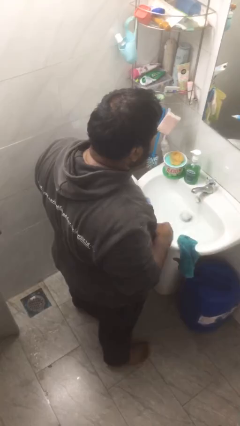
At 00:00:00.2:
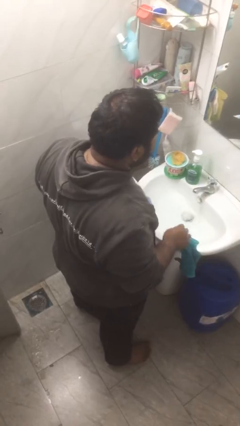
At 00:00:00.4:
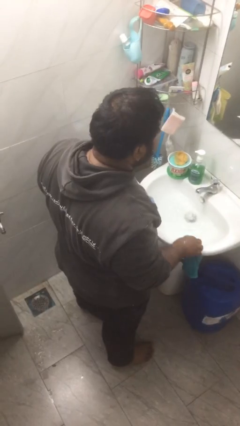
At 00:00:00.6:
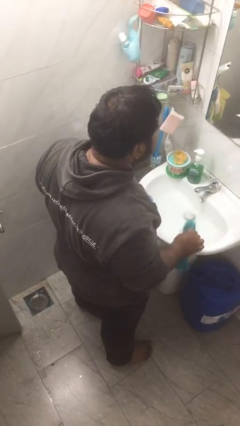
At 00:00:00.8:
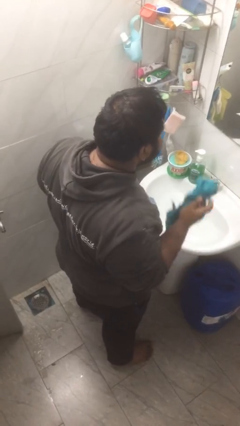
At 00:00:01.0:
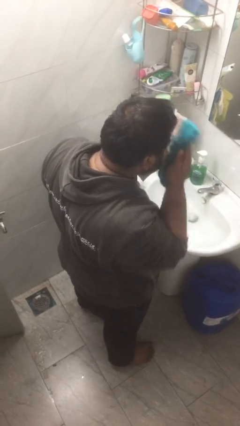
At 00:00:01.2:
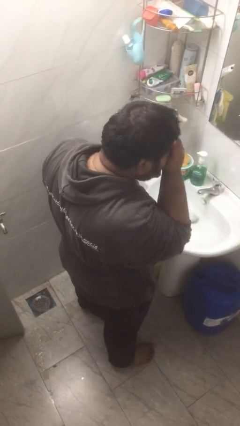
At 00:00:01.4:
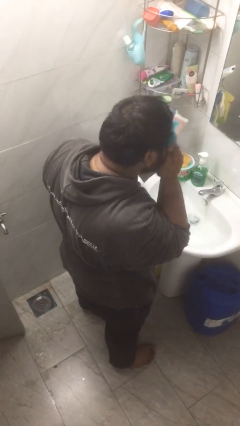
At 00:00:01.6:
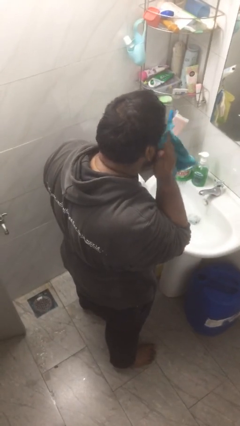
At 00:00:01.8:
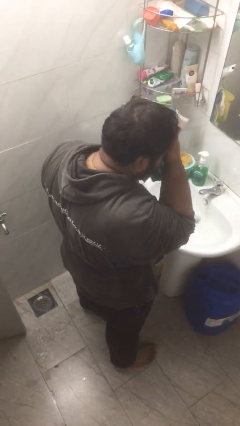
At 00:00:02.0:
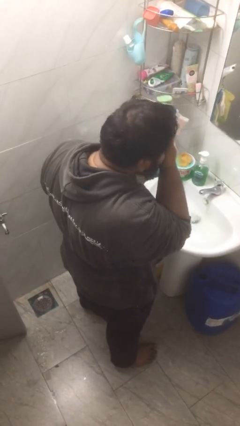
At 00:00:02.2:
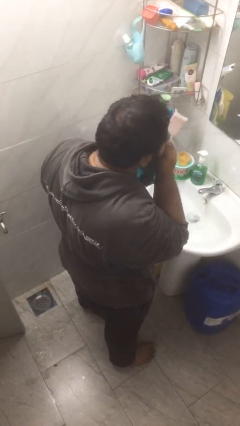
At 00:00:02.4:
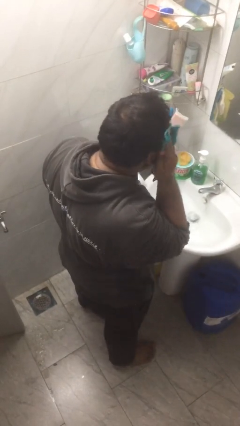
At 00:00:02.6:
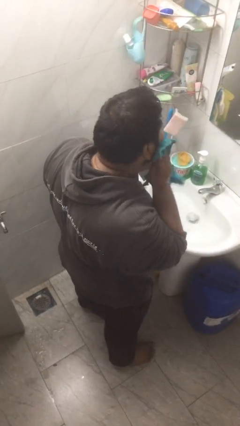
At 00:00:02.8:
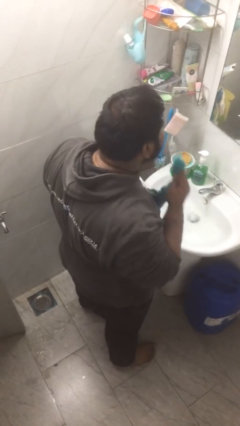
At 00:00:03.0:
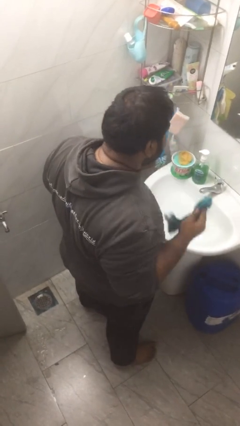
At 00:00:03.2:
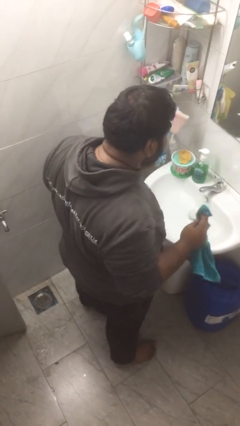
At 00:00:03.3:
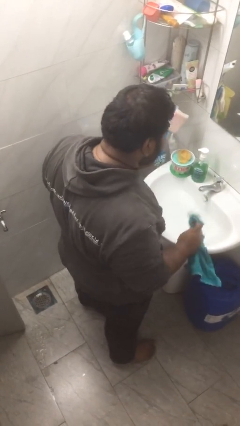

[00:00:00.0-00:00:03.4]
person dries face with towel

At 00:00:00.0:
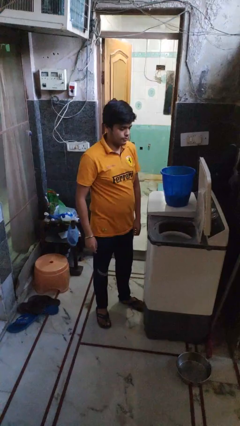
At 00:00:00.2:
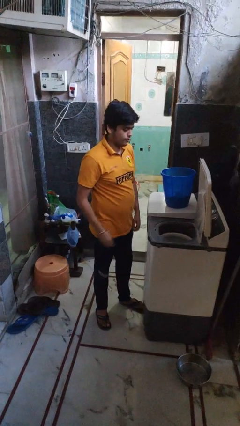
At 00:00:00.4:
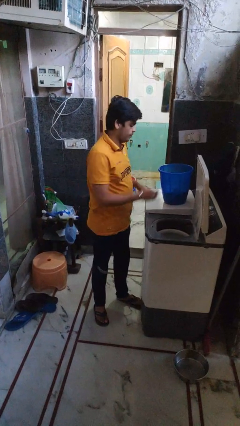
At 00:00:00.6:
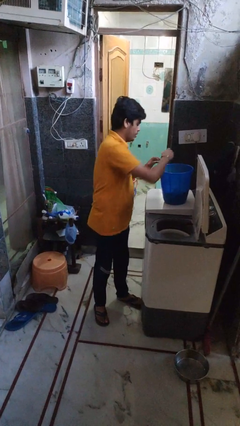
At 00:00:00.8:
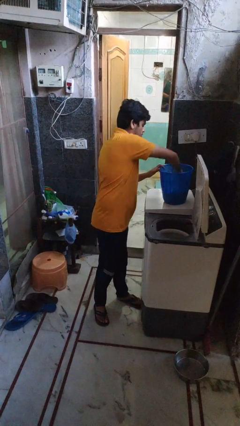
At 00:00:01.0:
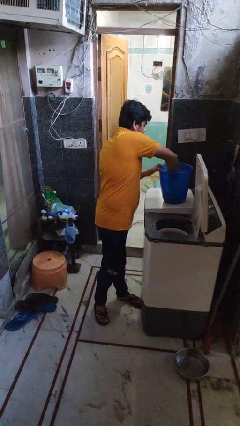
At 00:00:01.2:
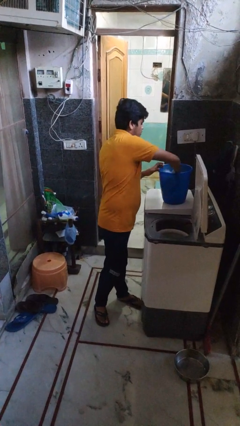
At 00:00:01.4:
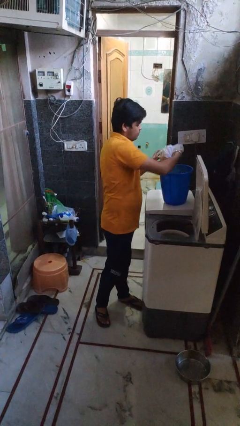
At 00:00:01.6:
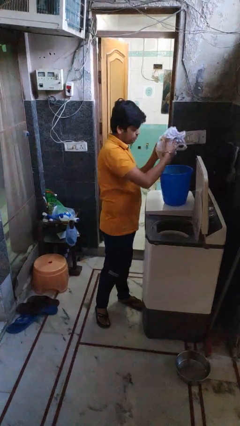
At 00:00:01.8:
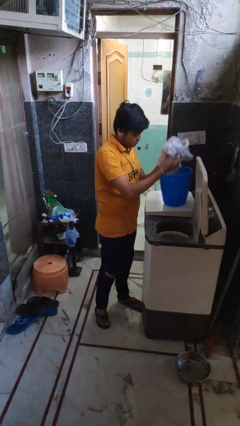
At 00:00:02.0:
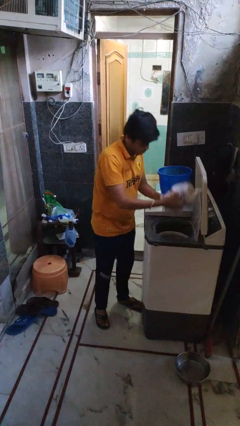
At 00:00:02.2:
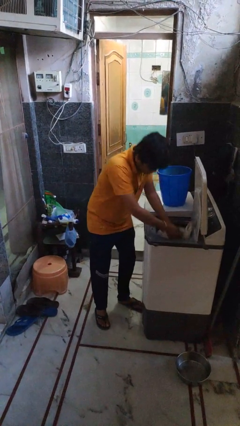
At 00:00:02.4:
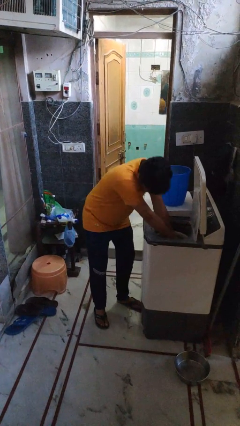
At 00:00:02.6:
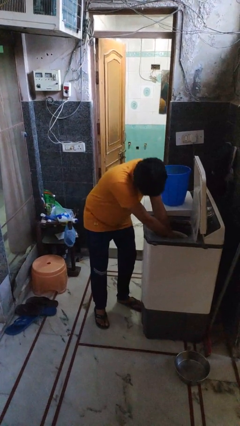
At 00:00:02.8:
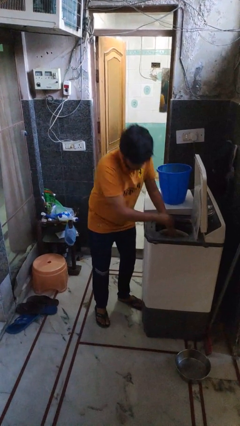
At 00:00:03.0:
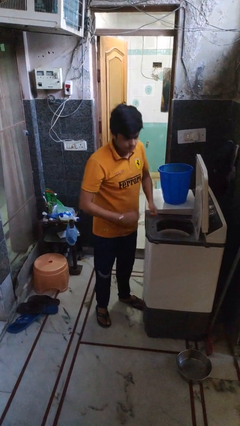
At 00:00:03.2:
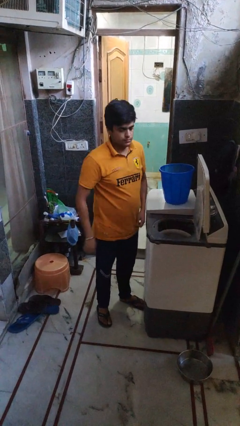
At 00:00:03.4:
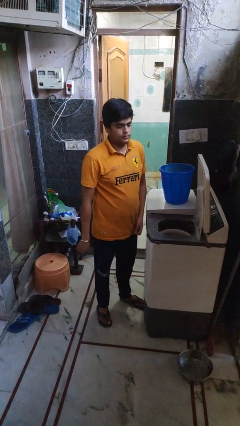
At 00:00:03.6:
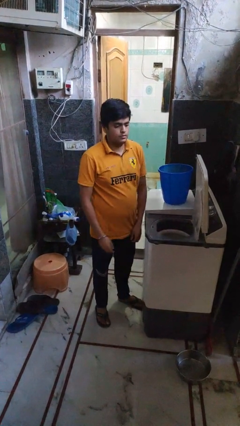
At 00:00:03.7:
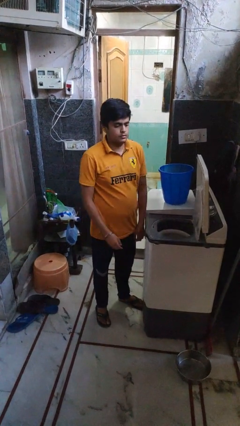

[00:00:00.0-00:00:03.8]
person loads clotheswasher

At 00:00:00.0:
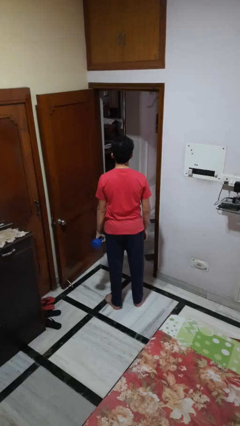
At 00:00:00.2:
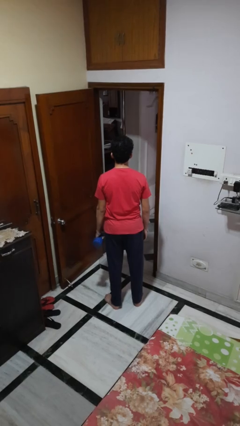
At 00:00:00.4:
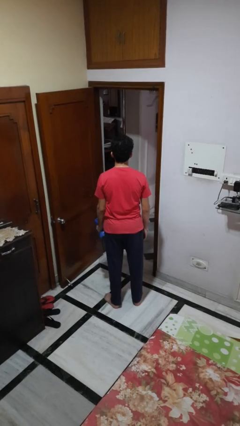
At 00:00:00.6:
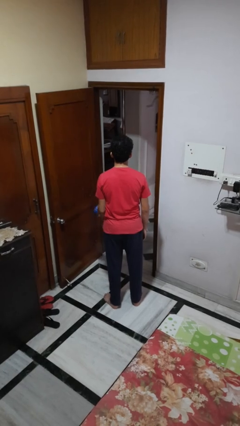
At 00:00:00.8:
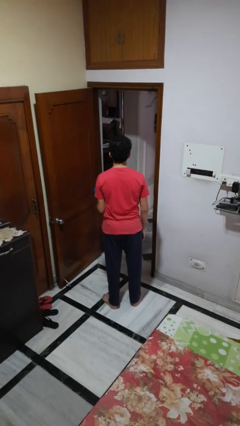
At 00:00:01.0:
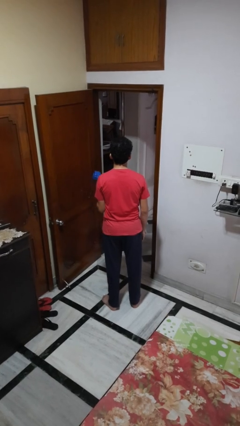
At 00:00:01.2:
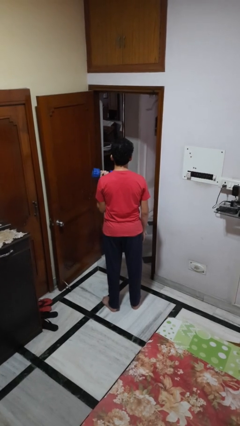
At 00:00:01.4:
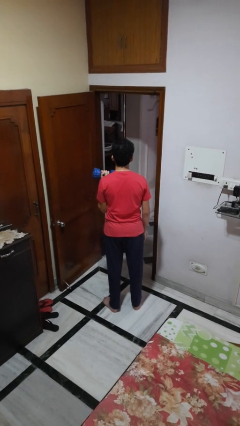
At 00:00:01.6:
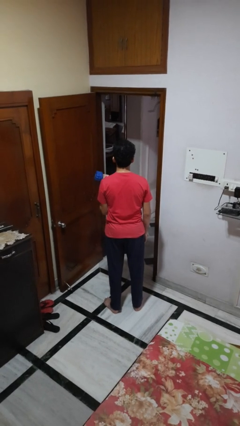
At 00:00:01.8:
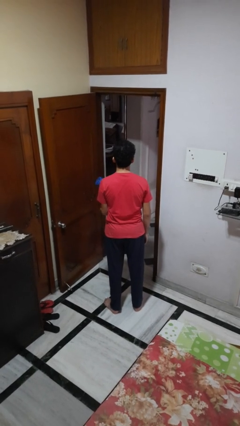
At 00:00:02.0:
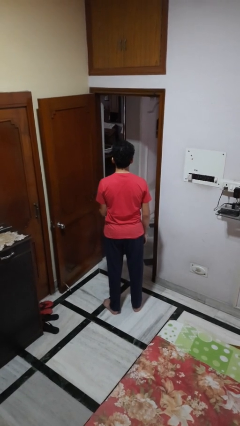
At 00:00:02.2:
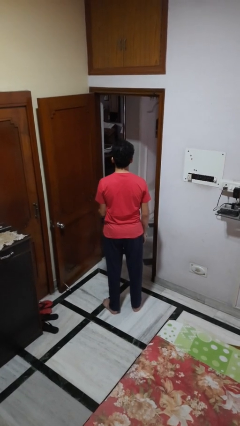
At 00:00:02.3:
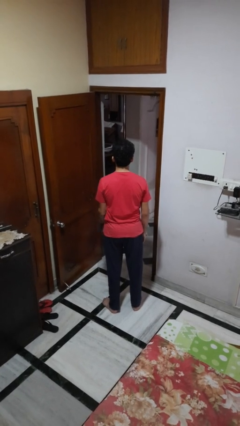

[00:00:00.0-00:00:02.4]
person lifts dumbbells

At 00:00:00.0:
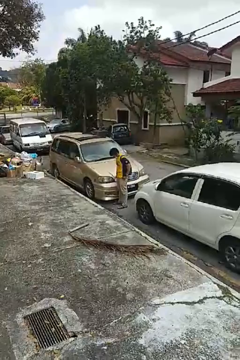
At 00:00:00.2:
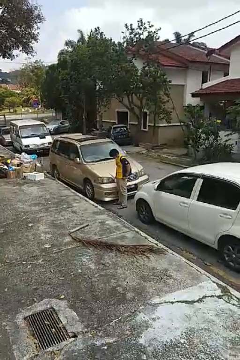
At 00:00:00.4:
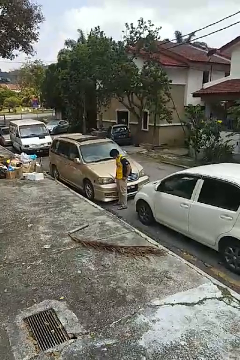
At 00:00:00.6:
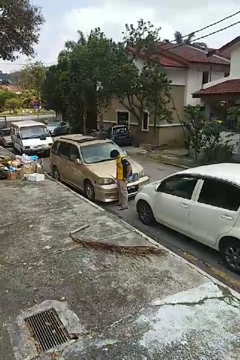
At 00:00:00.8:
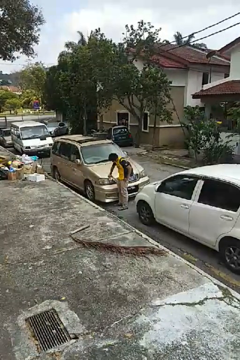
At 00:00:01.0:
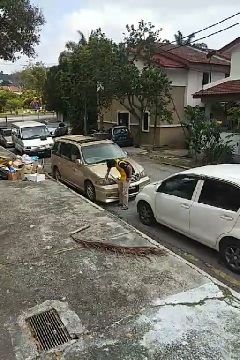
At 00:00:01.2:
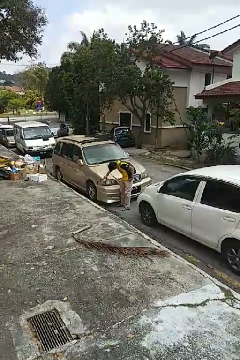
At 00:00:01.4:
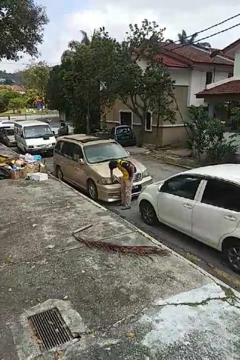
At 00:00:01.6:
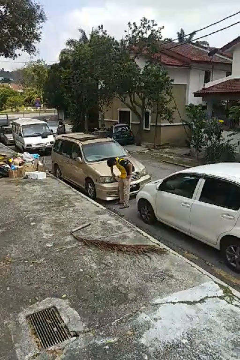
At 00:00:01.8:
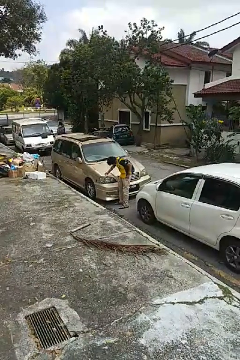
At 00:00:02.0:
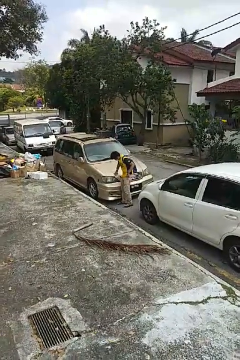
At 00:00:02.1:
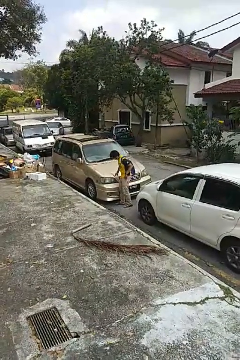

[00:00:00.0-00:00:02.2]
person polishes car with rag

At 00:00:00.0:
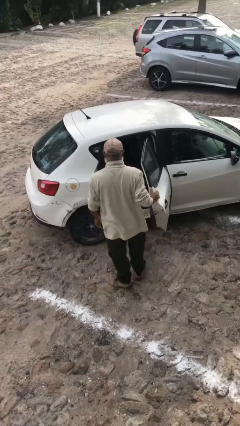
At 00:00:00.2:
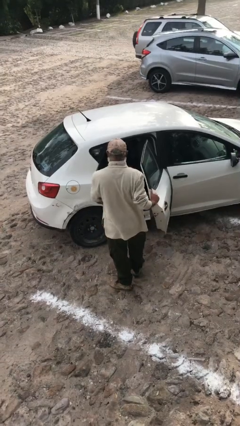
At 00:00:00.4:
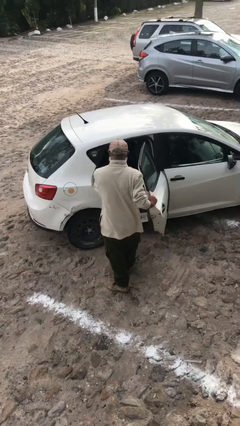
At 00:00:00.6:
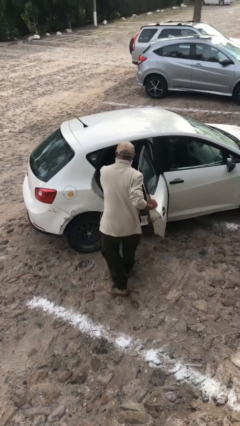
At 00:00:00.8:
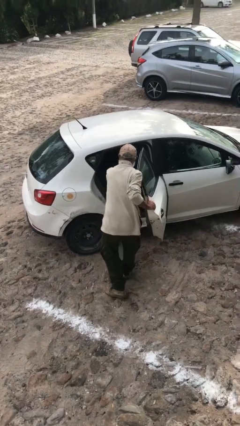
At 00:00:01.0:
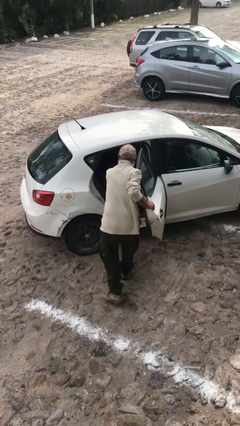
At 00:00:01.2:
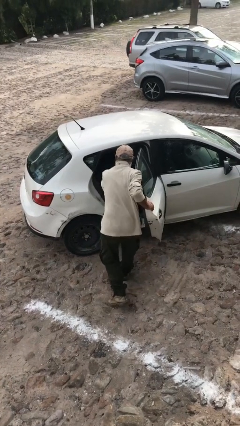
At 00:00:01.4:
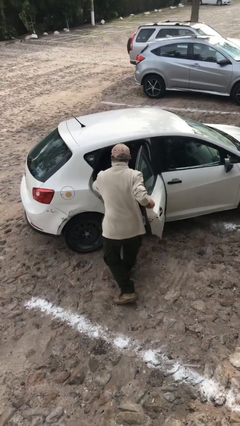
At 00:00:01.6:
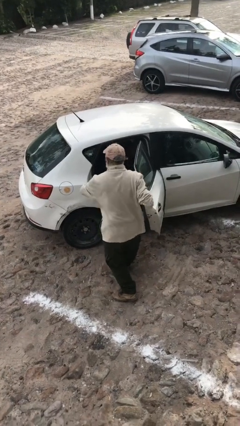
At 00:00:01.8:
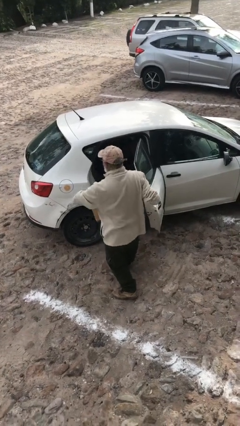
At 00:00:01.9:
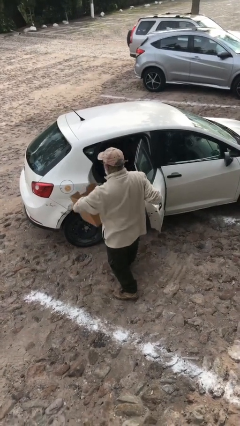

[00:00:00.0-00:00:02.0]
person unloads car

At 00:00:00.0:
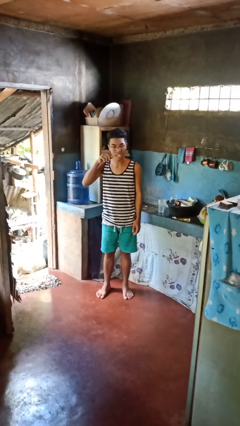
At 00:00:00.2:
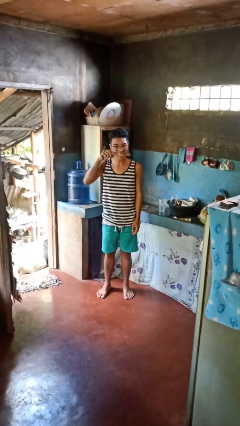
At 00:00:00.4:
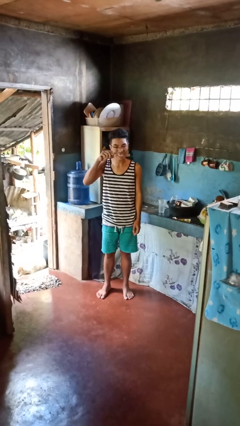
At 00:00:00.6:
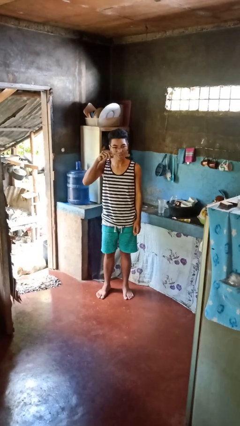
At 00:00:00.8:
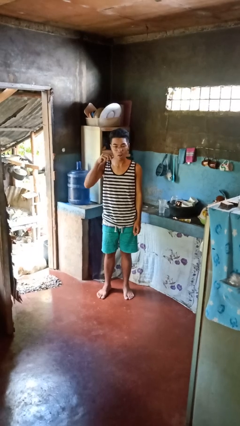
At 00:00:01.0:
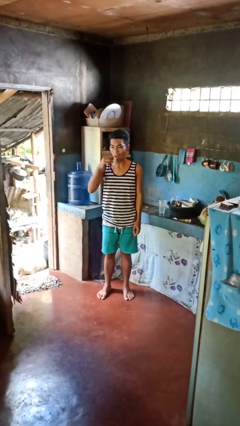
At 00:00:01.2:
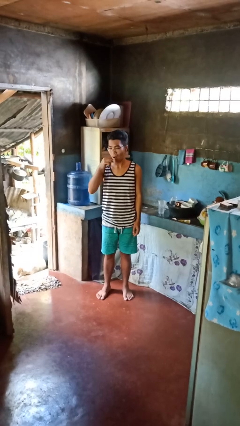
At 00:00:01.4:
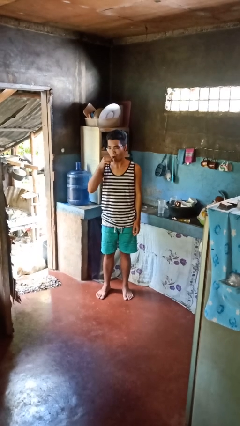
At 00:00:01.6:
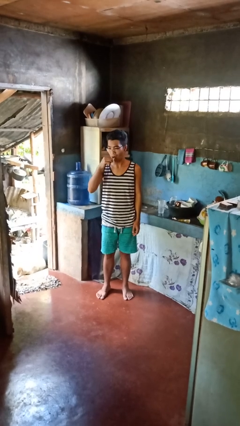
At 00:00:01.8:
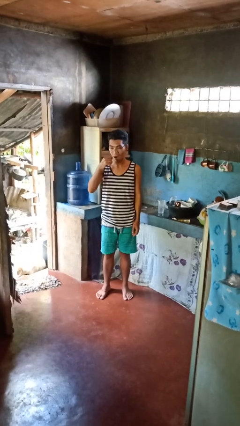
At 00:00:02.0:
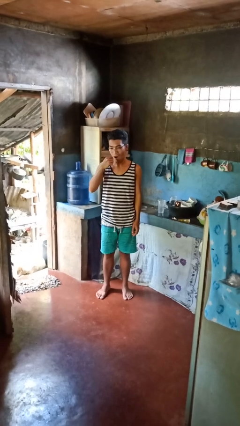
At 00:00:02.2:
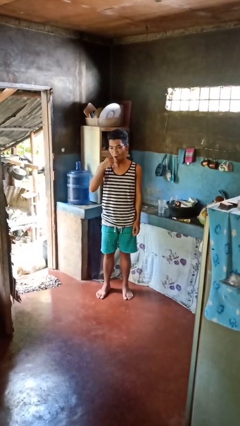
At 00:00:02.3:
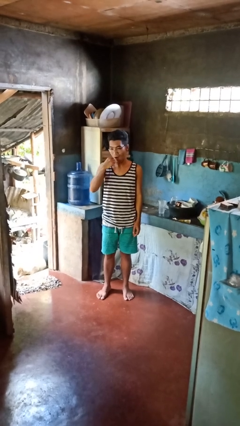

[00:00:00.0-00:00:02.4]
person brushes teeth

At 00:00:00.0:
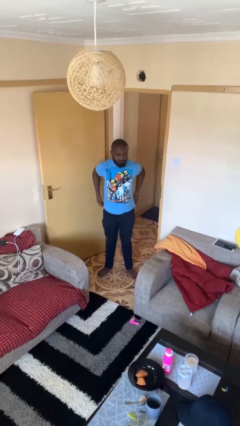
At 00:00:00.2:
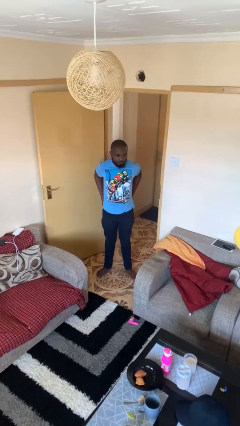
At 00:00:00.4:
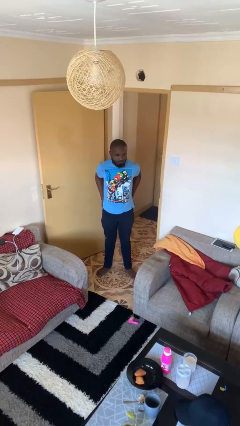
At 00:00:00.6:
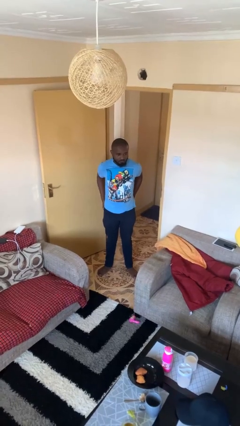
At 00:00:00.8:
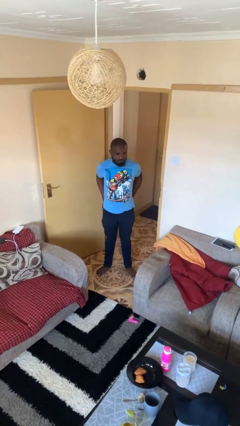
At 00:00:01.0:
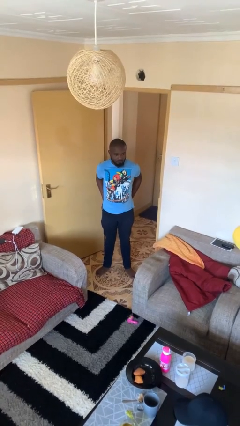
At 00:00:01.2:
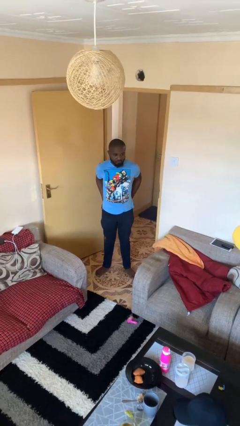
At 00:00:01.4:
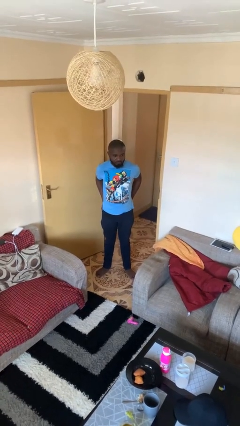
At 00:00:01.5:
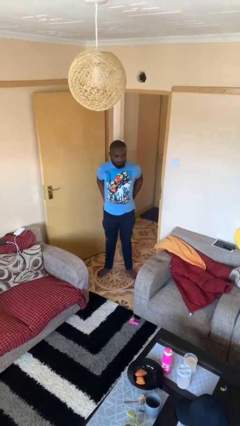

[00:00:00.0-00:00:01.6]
person puts hands in back pockets
